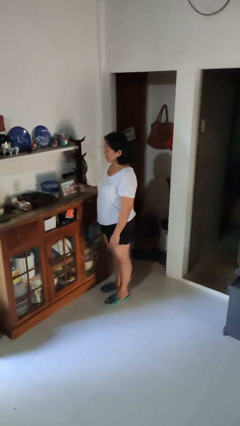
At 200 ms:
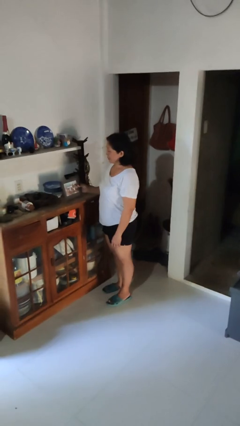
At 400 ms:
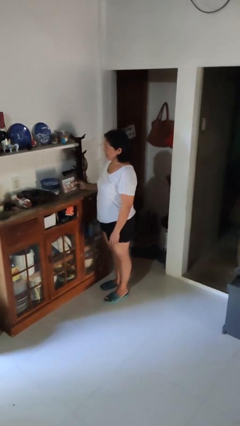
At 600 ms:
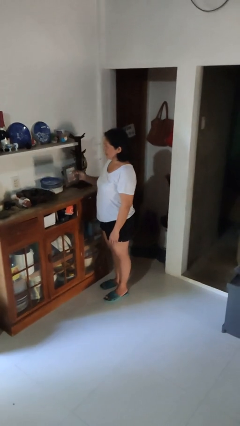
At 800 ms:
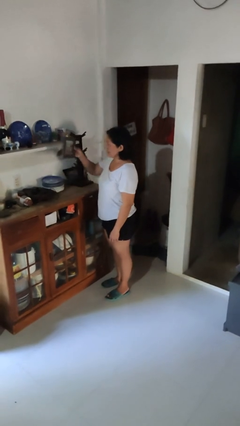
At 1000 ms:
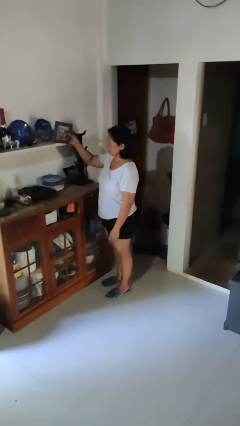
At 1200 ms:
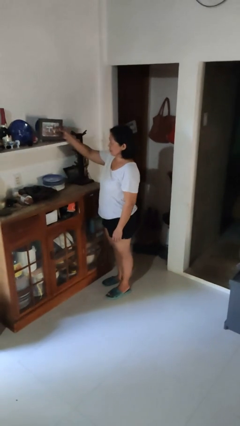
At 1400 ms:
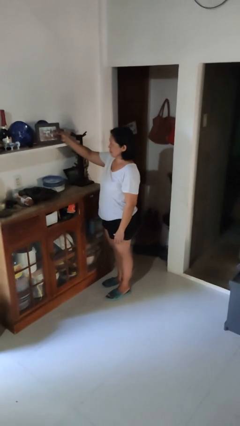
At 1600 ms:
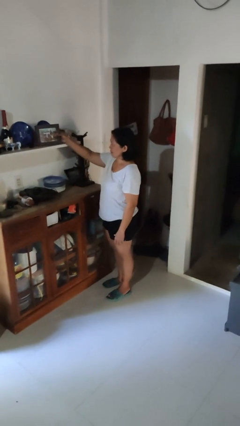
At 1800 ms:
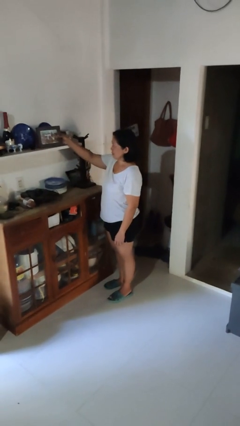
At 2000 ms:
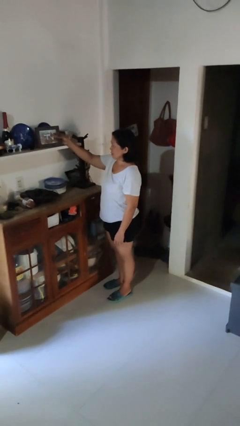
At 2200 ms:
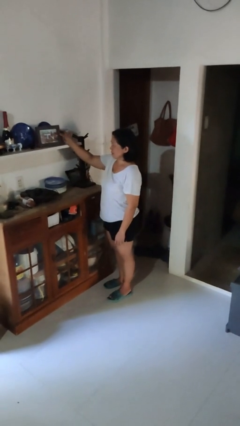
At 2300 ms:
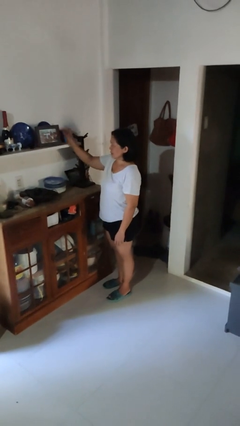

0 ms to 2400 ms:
person puts down object on shelf

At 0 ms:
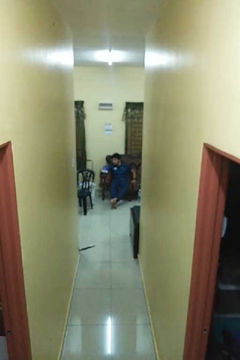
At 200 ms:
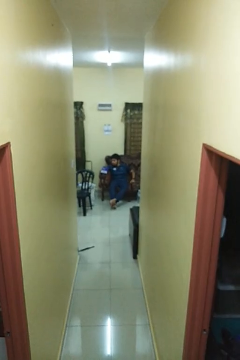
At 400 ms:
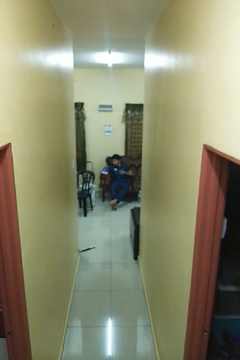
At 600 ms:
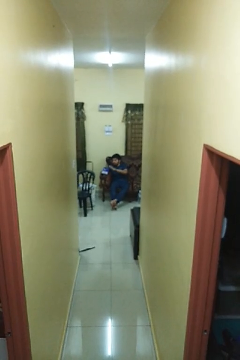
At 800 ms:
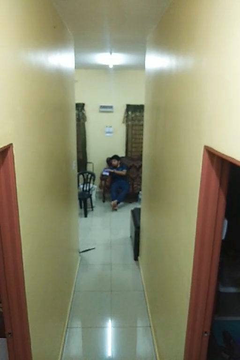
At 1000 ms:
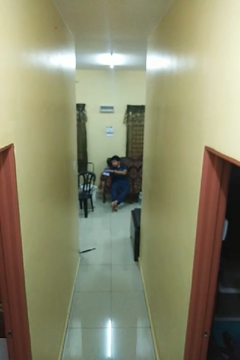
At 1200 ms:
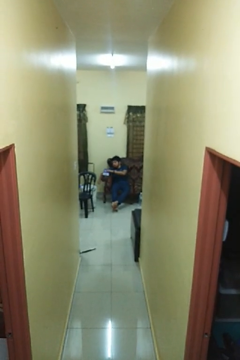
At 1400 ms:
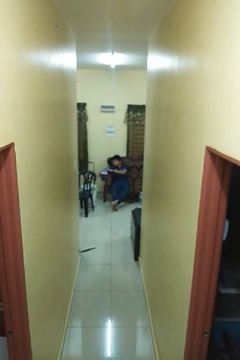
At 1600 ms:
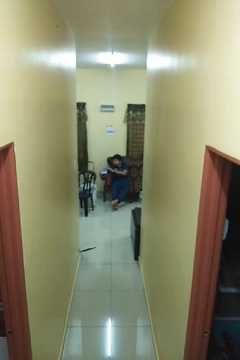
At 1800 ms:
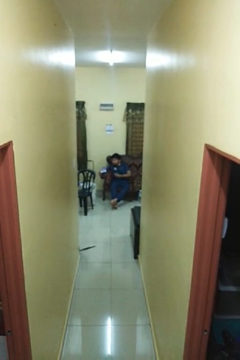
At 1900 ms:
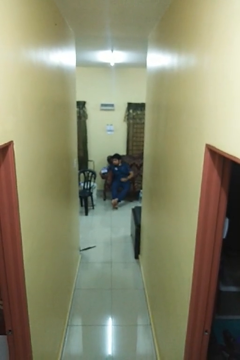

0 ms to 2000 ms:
person taps object with finger

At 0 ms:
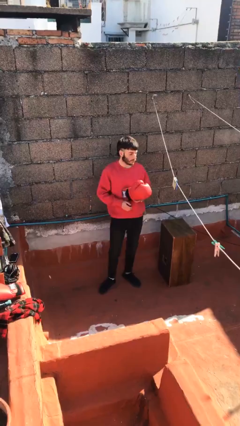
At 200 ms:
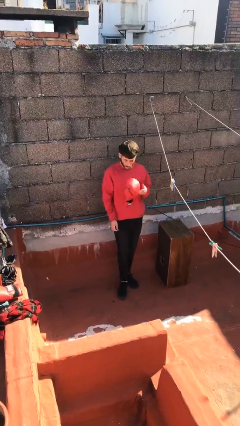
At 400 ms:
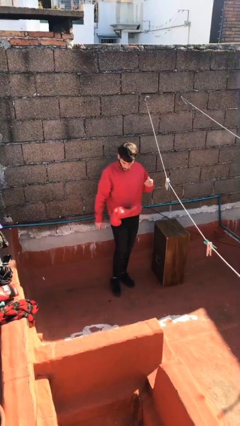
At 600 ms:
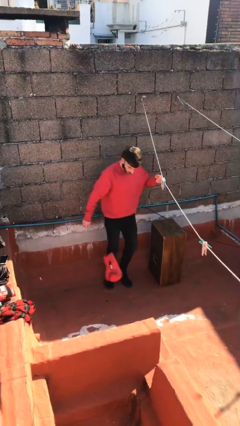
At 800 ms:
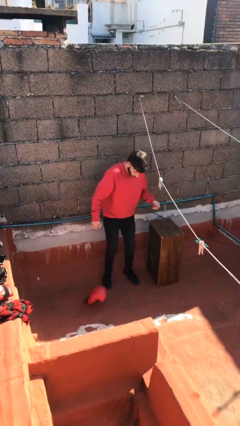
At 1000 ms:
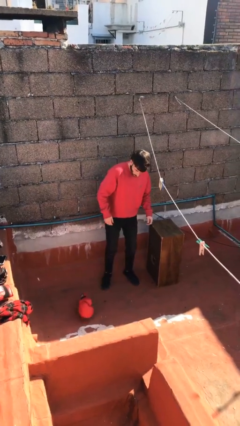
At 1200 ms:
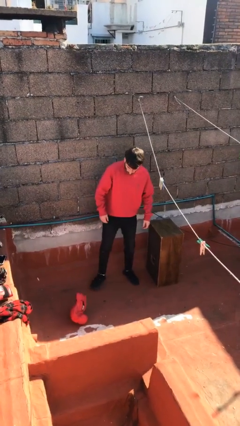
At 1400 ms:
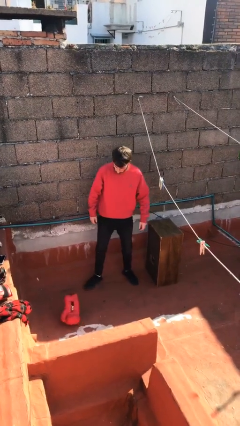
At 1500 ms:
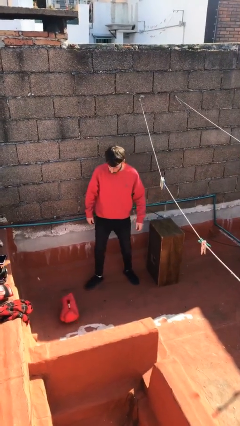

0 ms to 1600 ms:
person drops object

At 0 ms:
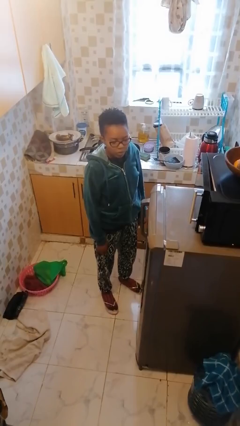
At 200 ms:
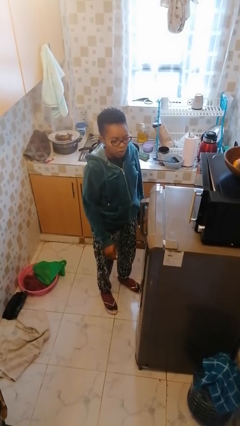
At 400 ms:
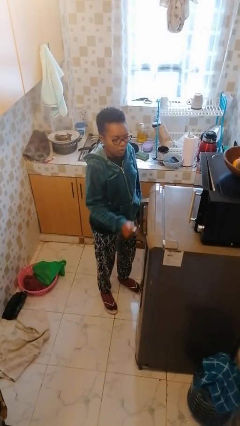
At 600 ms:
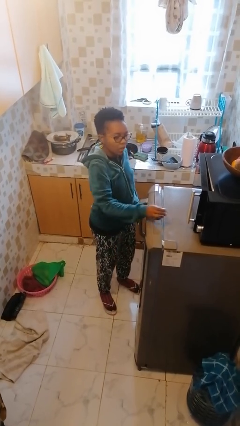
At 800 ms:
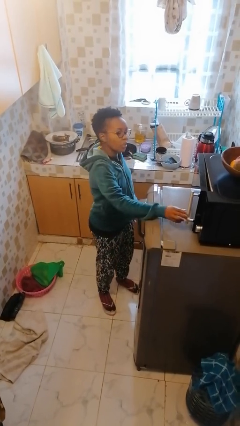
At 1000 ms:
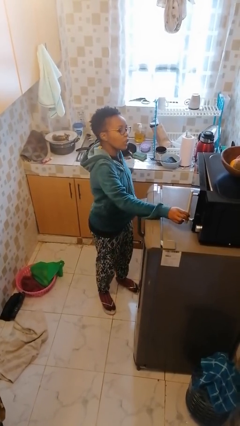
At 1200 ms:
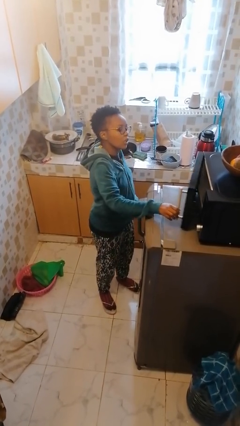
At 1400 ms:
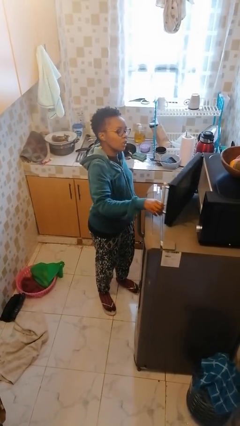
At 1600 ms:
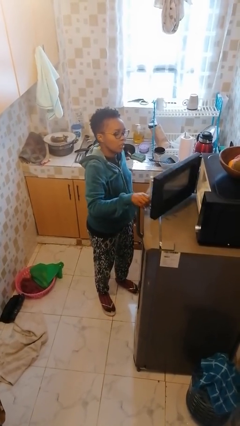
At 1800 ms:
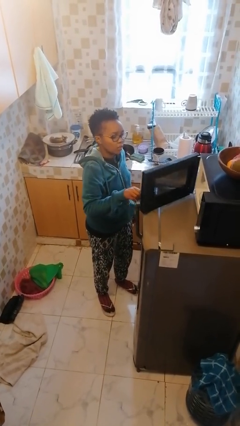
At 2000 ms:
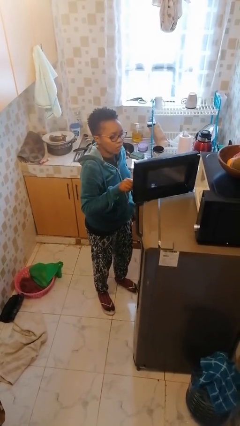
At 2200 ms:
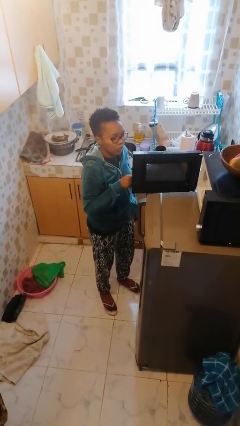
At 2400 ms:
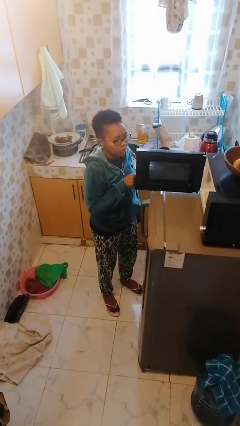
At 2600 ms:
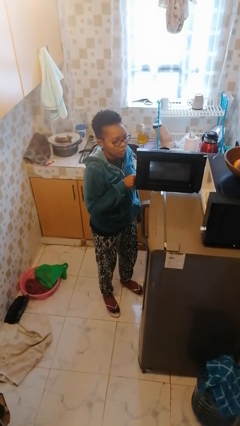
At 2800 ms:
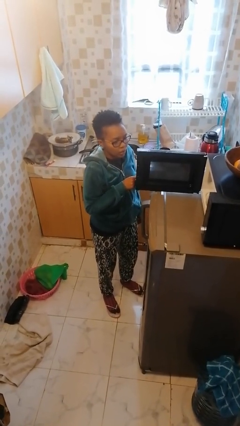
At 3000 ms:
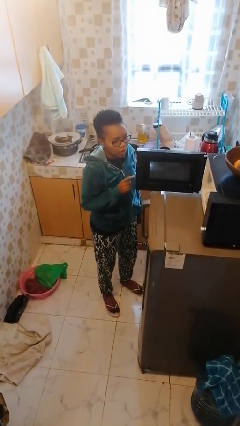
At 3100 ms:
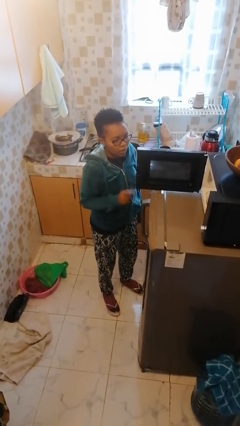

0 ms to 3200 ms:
person opens microwave

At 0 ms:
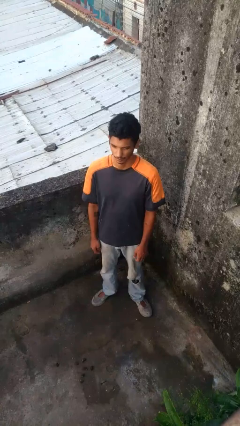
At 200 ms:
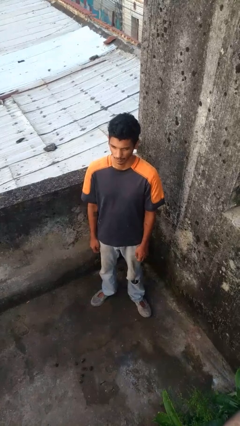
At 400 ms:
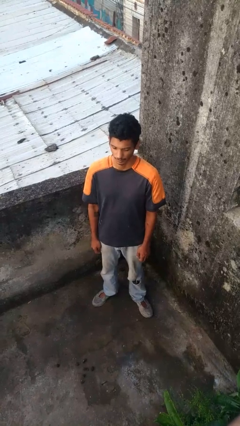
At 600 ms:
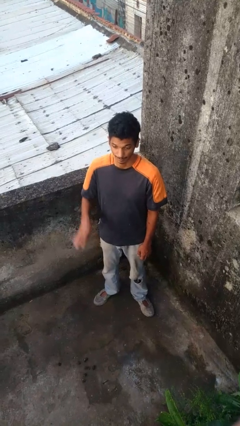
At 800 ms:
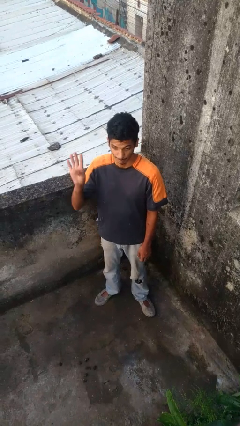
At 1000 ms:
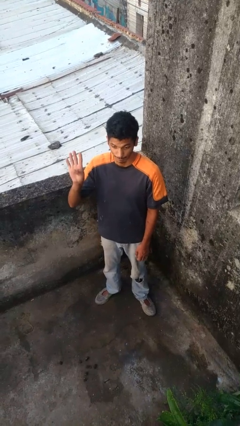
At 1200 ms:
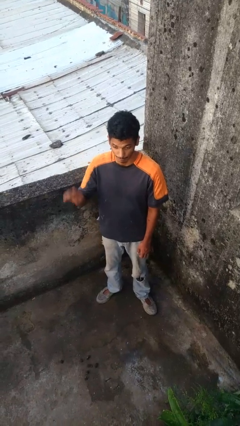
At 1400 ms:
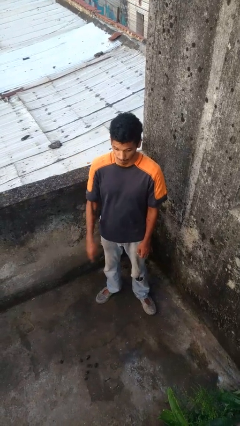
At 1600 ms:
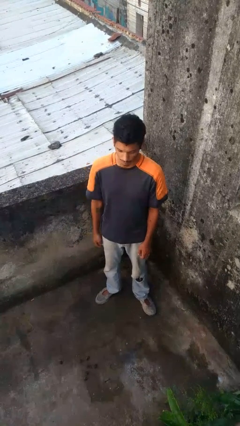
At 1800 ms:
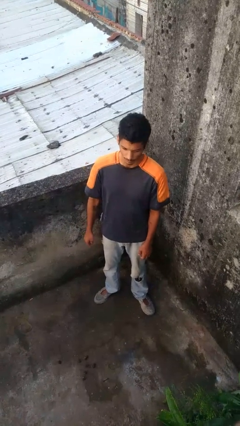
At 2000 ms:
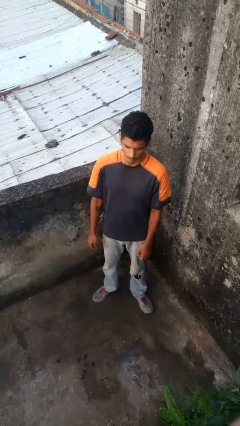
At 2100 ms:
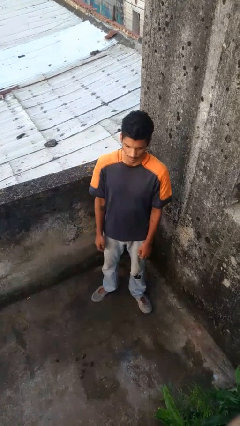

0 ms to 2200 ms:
person gestures number four

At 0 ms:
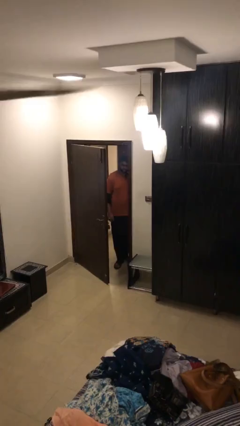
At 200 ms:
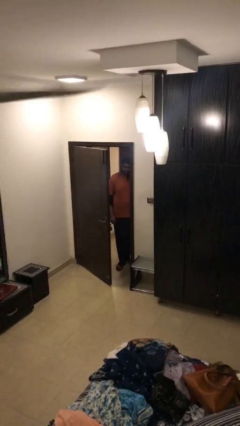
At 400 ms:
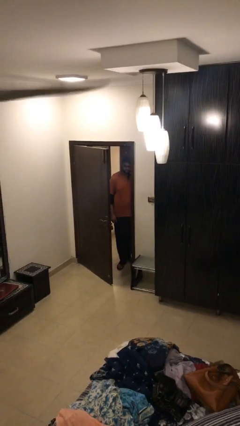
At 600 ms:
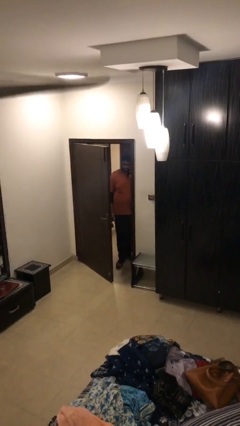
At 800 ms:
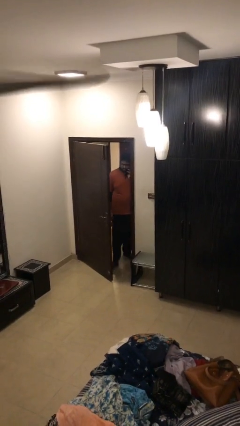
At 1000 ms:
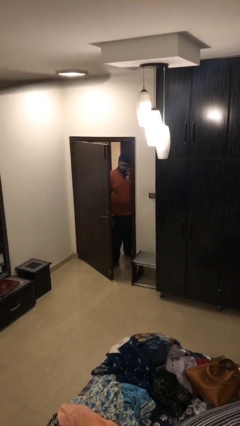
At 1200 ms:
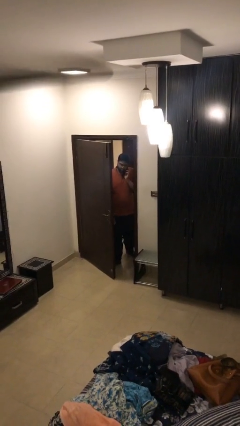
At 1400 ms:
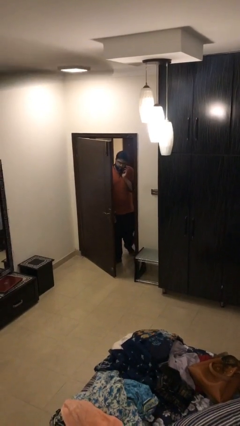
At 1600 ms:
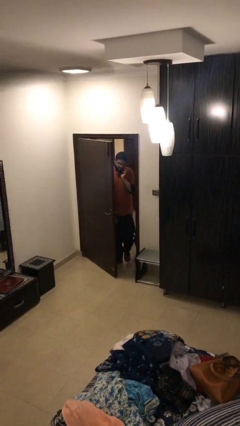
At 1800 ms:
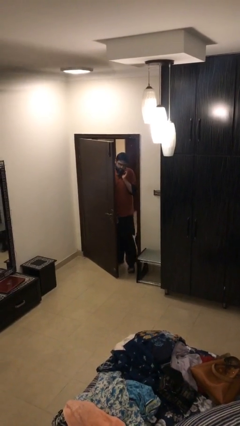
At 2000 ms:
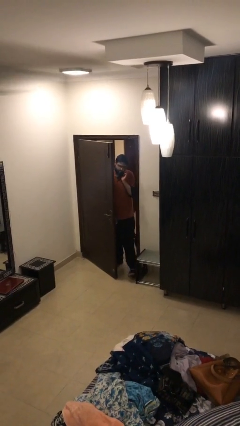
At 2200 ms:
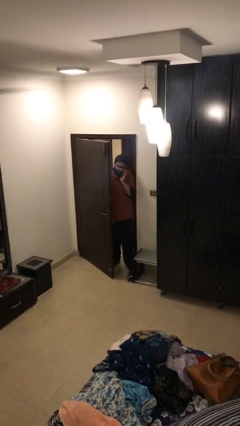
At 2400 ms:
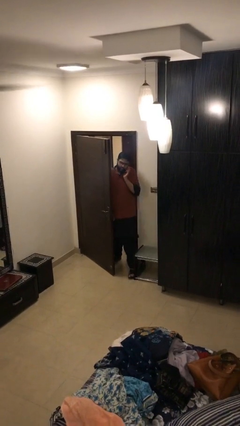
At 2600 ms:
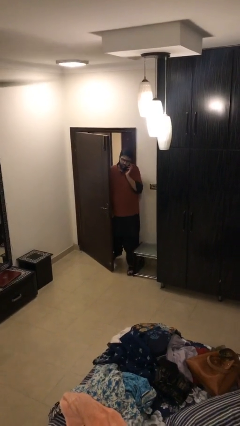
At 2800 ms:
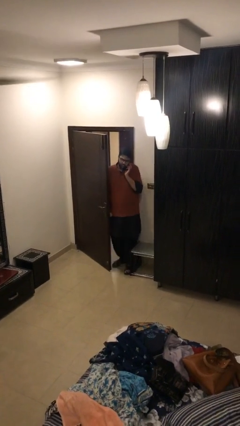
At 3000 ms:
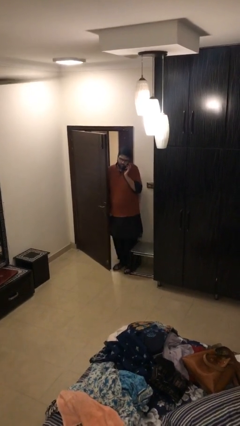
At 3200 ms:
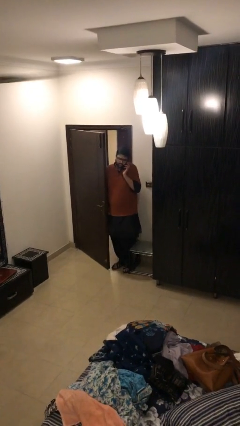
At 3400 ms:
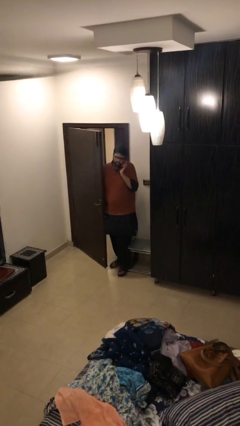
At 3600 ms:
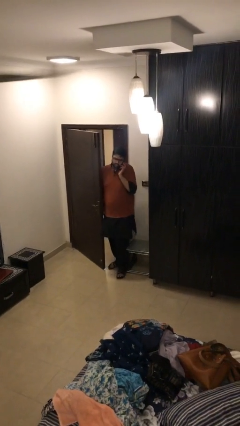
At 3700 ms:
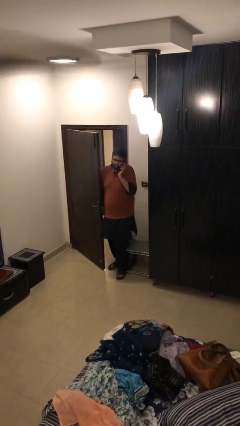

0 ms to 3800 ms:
person enters scene through structure

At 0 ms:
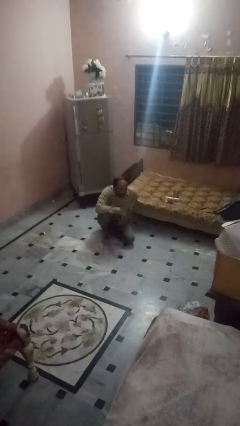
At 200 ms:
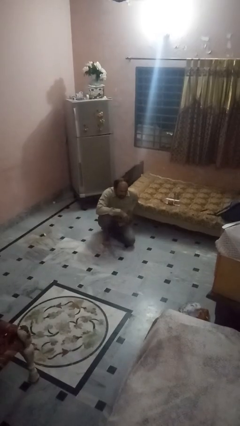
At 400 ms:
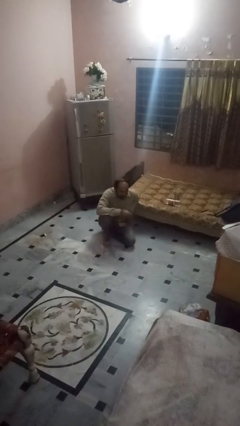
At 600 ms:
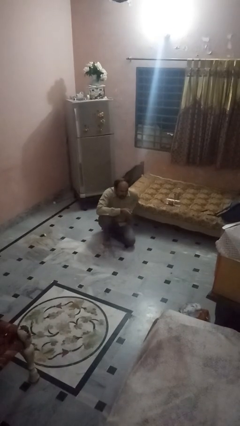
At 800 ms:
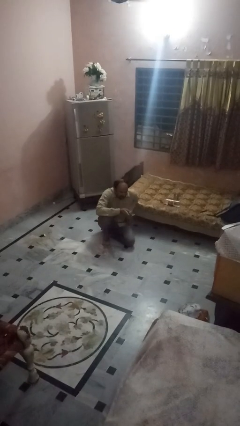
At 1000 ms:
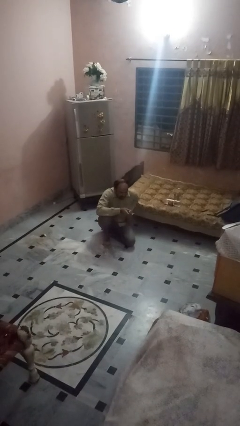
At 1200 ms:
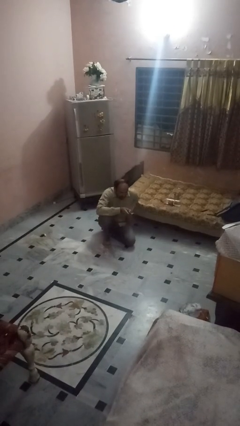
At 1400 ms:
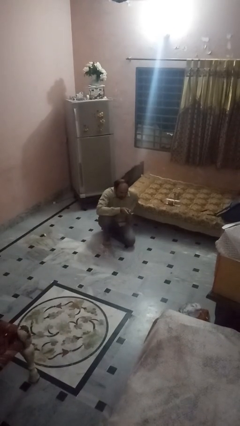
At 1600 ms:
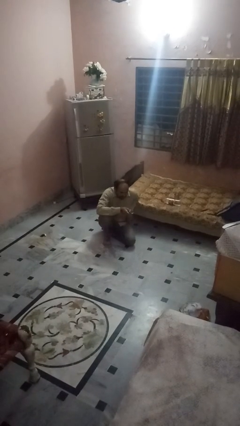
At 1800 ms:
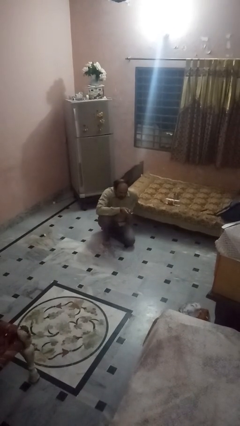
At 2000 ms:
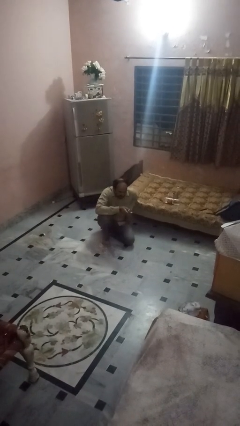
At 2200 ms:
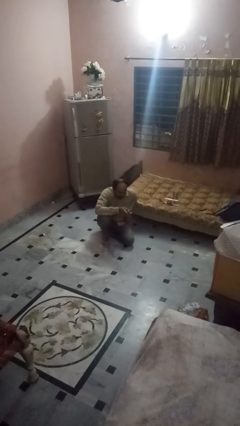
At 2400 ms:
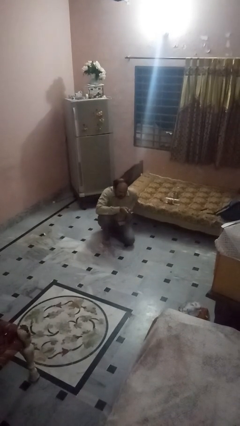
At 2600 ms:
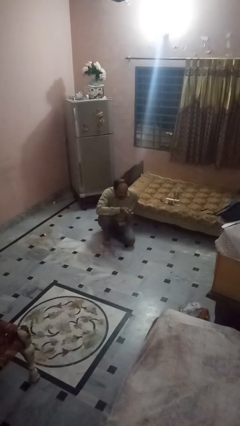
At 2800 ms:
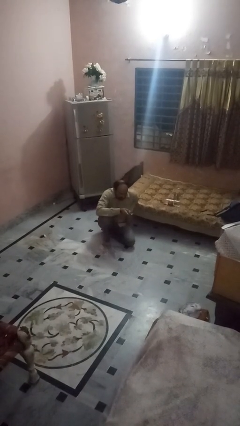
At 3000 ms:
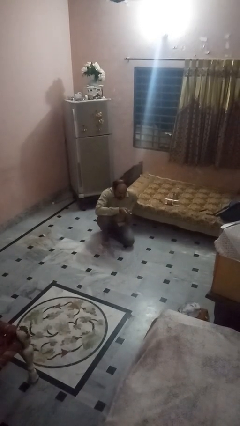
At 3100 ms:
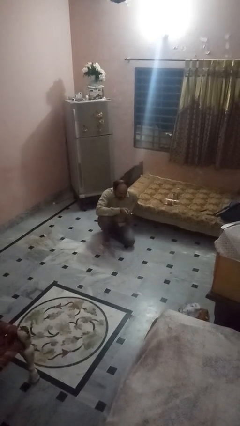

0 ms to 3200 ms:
person uses television remote
